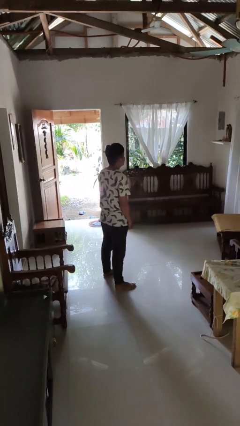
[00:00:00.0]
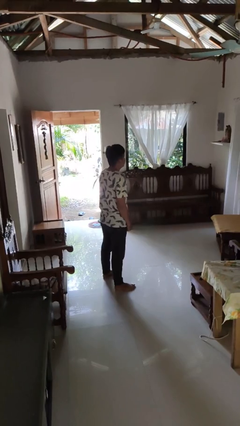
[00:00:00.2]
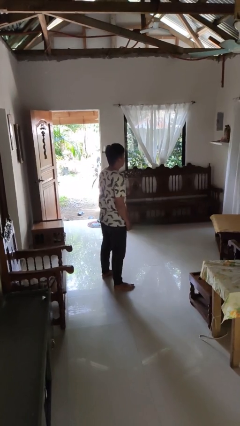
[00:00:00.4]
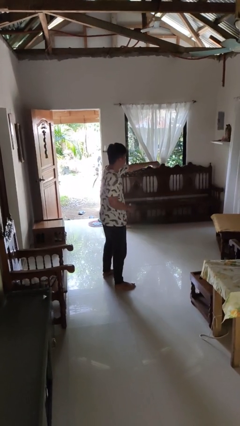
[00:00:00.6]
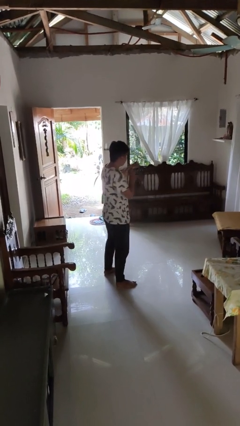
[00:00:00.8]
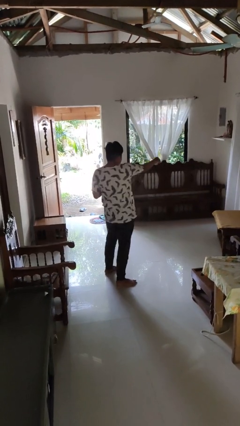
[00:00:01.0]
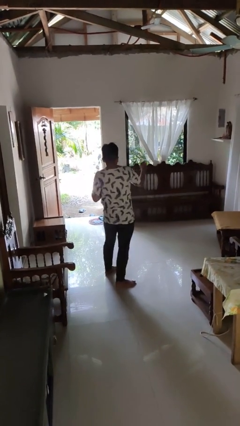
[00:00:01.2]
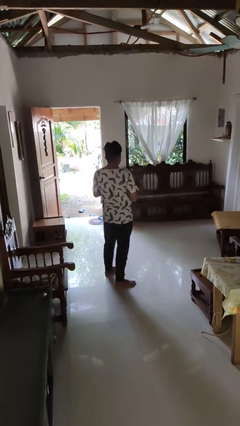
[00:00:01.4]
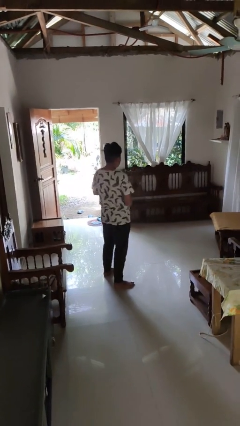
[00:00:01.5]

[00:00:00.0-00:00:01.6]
person punches

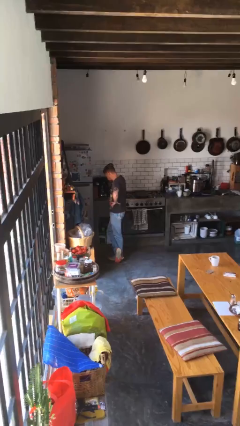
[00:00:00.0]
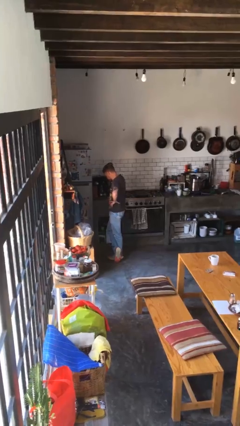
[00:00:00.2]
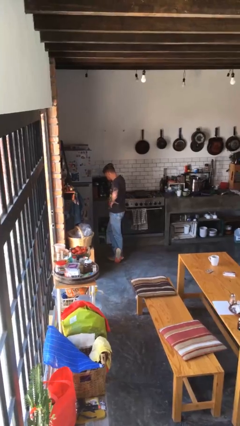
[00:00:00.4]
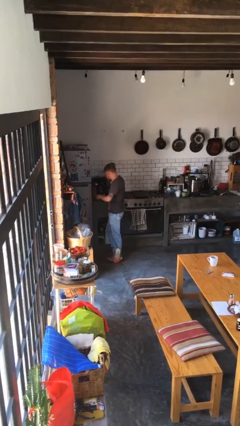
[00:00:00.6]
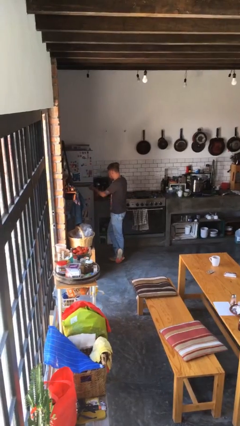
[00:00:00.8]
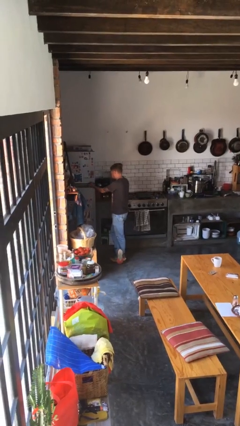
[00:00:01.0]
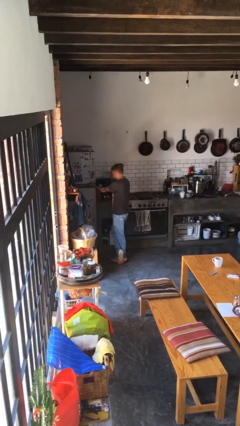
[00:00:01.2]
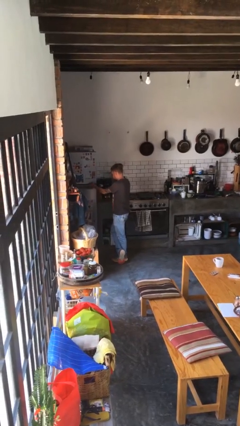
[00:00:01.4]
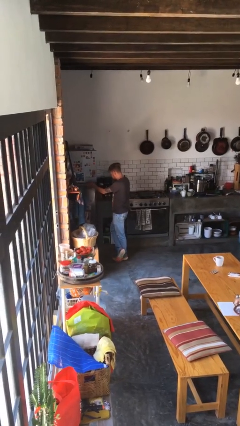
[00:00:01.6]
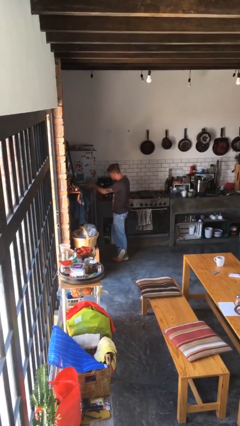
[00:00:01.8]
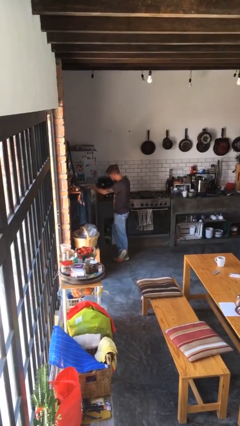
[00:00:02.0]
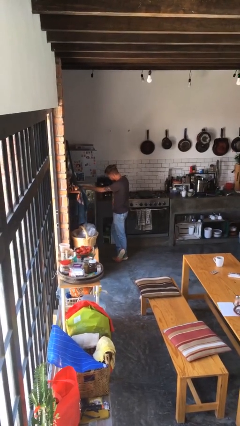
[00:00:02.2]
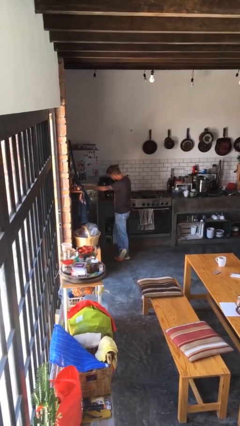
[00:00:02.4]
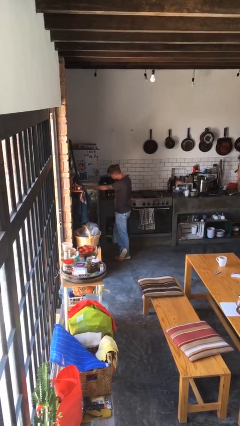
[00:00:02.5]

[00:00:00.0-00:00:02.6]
person opens refrigerator

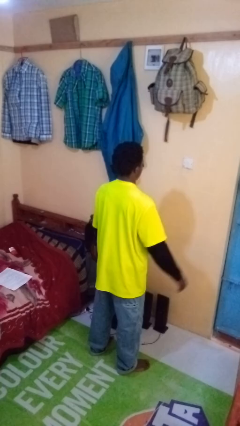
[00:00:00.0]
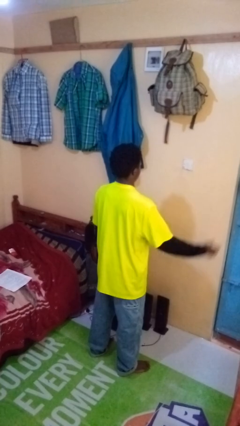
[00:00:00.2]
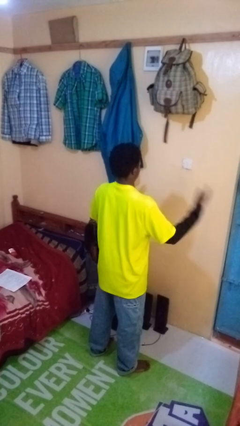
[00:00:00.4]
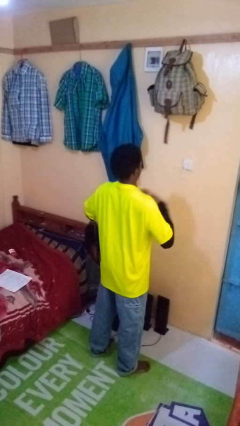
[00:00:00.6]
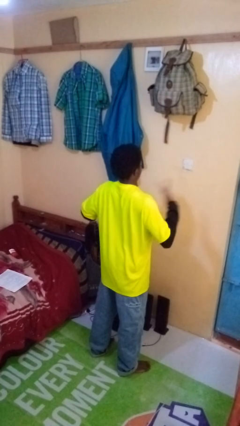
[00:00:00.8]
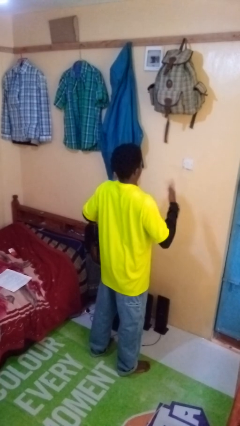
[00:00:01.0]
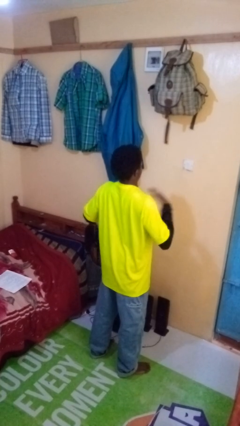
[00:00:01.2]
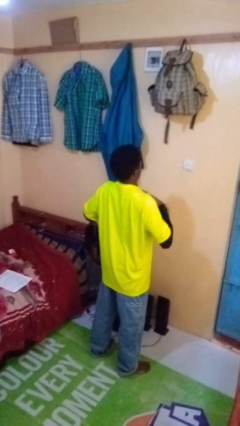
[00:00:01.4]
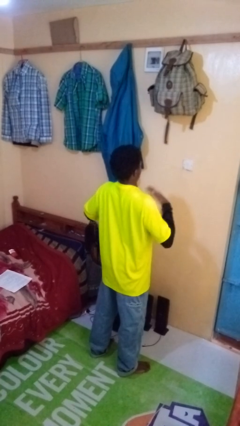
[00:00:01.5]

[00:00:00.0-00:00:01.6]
person drums on chest

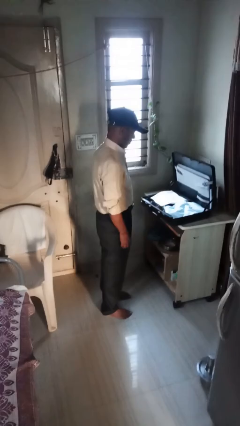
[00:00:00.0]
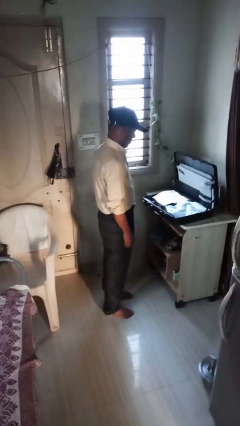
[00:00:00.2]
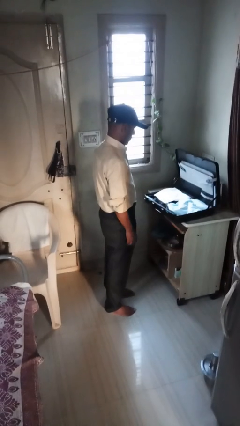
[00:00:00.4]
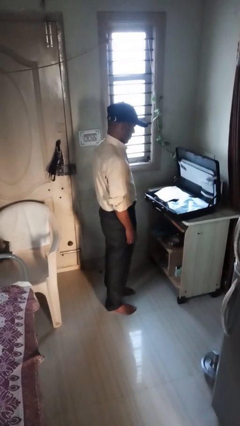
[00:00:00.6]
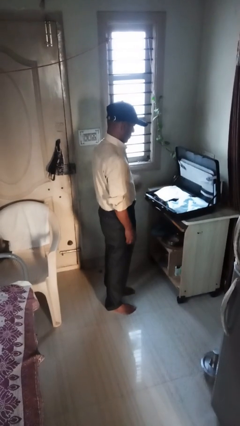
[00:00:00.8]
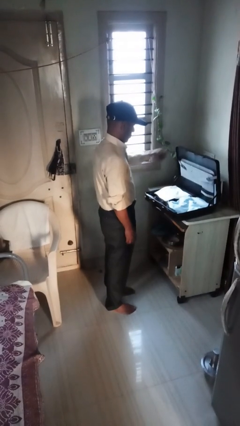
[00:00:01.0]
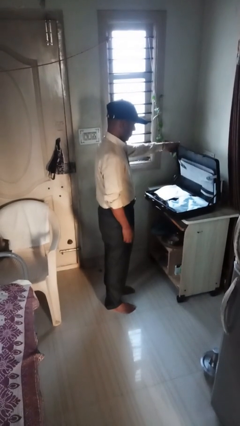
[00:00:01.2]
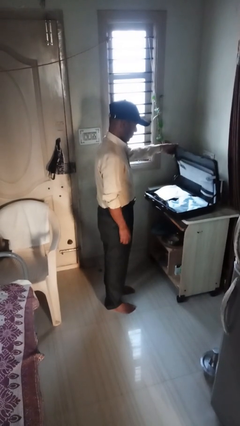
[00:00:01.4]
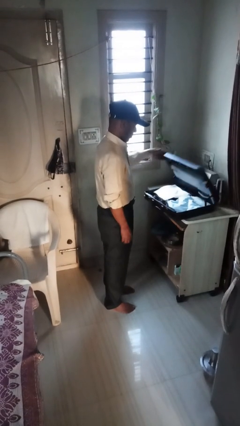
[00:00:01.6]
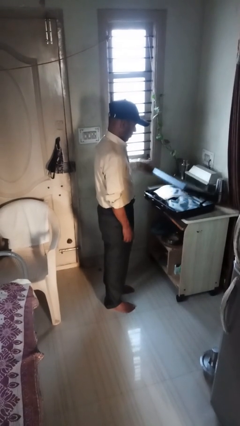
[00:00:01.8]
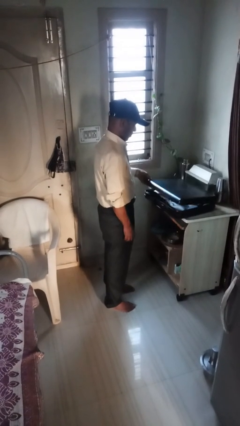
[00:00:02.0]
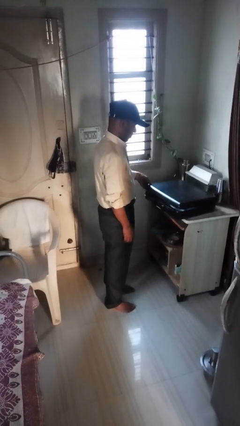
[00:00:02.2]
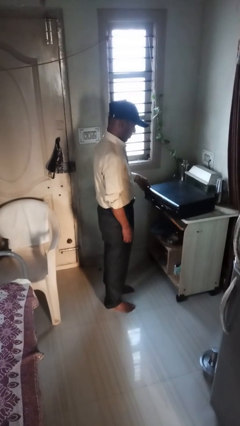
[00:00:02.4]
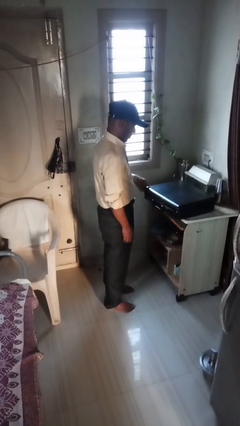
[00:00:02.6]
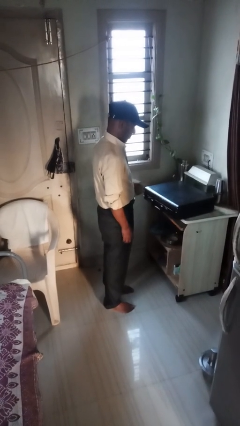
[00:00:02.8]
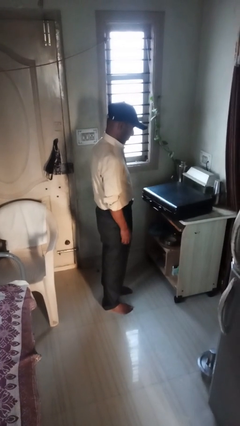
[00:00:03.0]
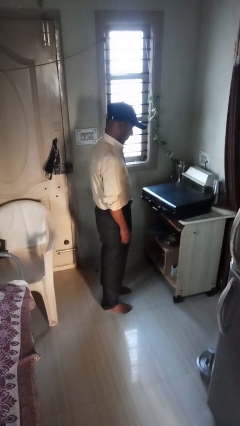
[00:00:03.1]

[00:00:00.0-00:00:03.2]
person closes suitcase

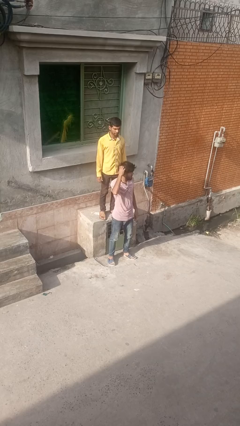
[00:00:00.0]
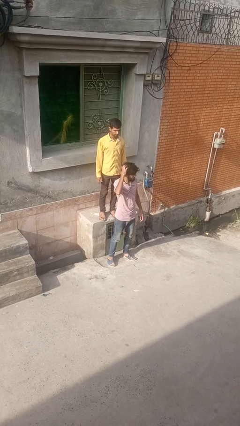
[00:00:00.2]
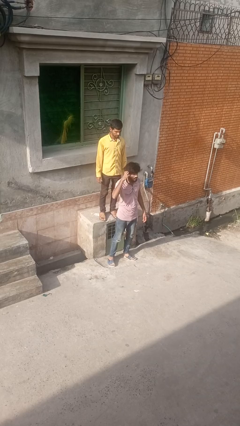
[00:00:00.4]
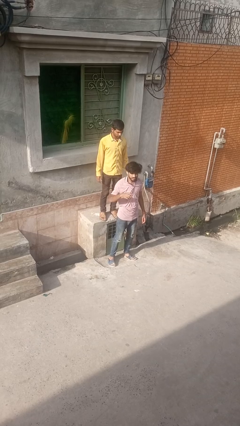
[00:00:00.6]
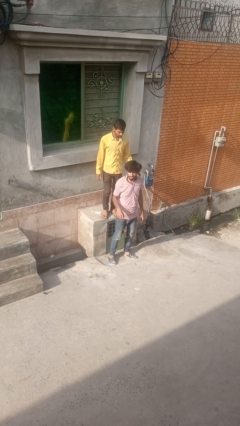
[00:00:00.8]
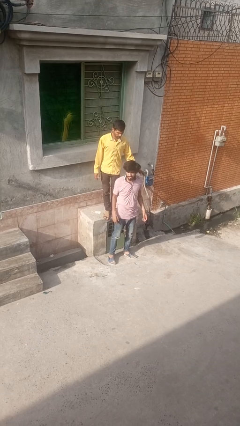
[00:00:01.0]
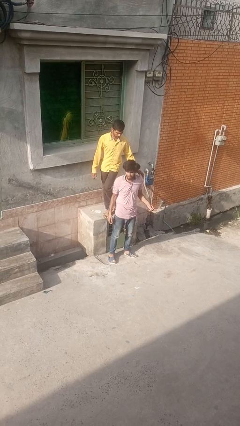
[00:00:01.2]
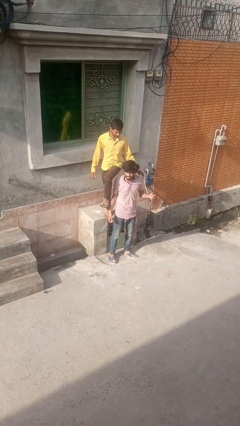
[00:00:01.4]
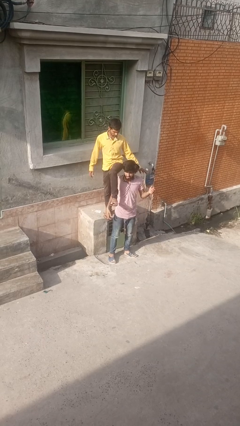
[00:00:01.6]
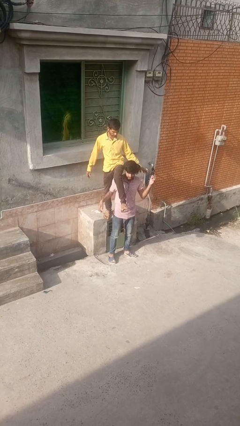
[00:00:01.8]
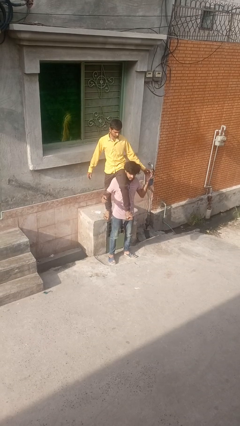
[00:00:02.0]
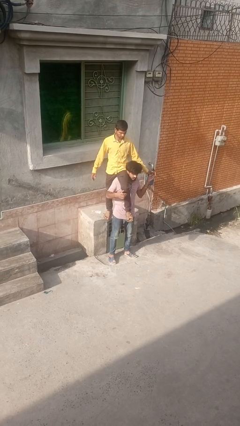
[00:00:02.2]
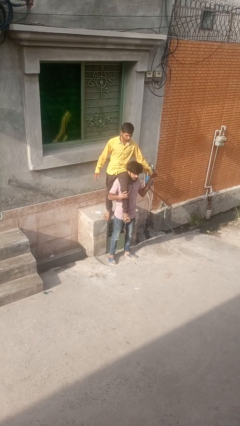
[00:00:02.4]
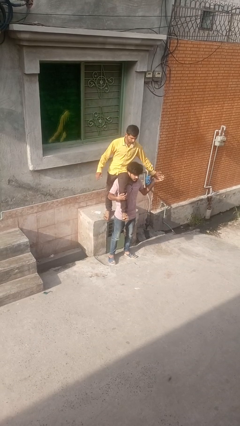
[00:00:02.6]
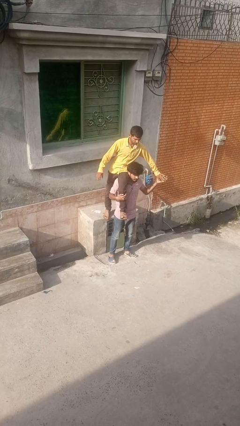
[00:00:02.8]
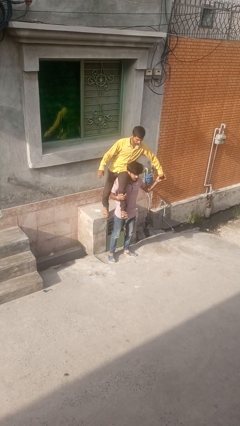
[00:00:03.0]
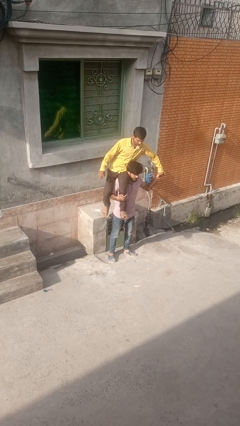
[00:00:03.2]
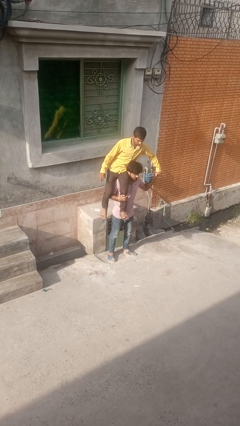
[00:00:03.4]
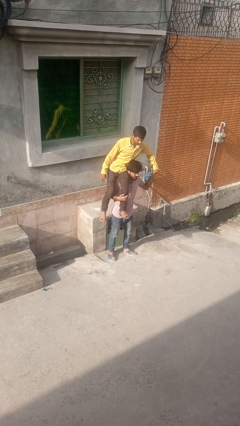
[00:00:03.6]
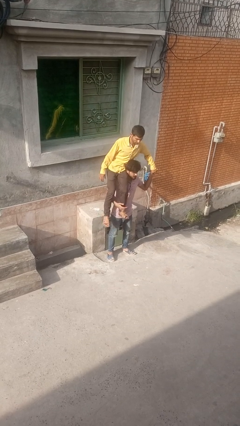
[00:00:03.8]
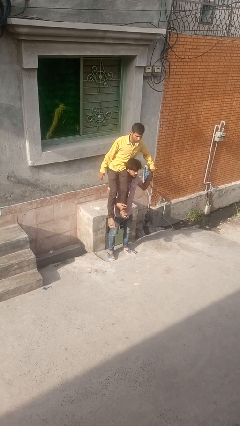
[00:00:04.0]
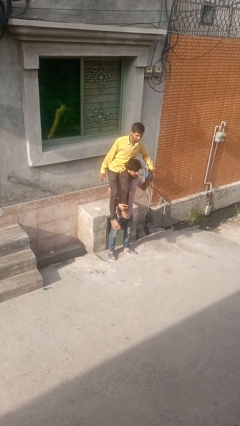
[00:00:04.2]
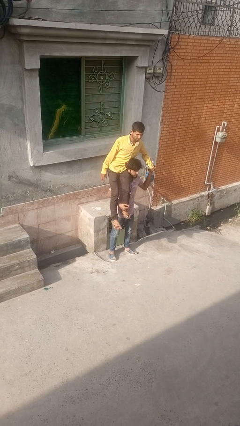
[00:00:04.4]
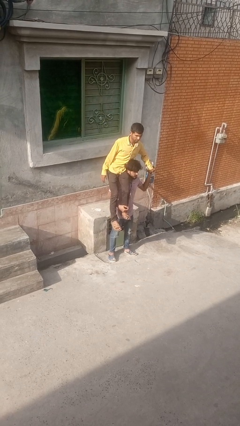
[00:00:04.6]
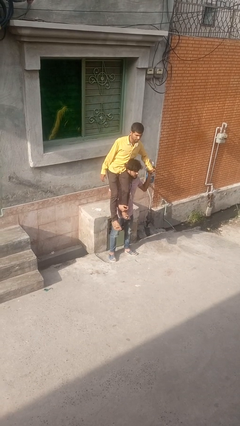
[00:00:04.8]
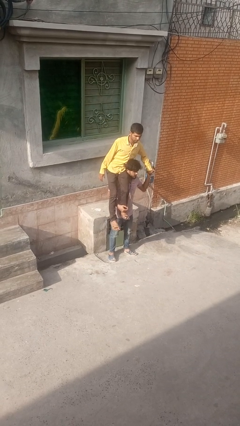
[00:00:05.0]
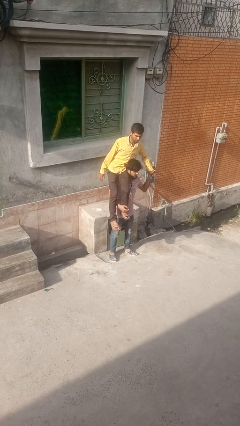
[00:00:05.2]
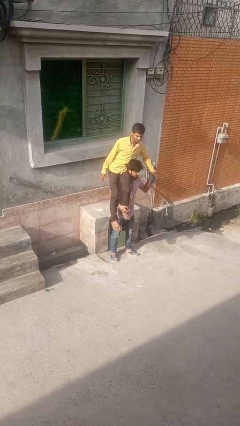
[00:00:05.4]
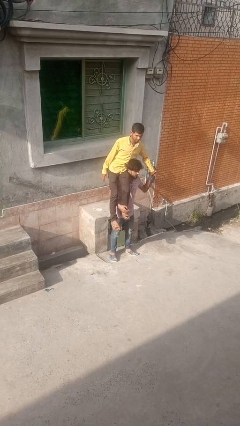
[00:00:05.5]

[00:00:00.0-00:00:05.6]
person carries person over shoulder

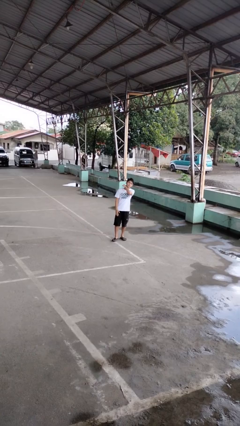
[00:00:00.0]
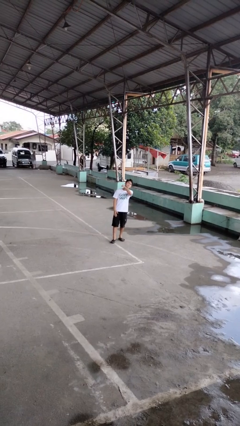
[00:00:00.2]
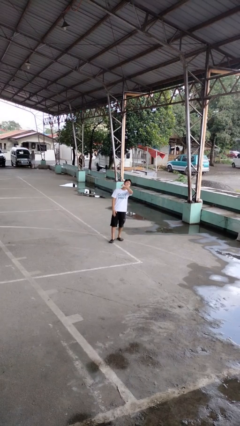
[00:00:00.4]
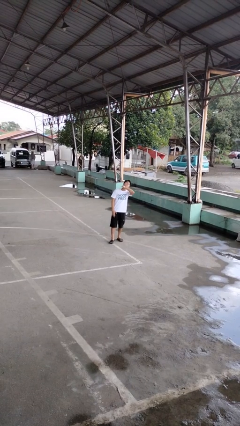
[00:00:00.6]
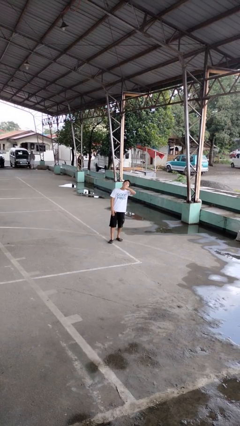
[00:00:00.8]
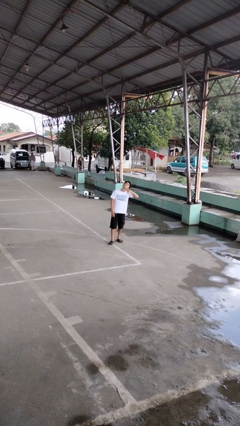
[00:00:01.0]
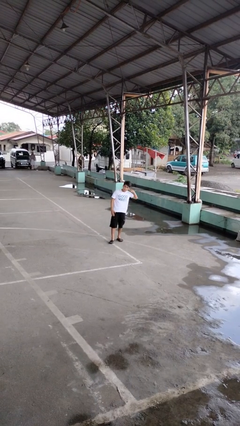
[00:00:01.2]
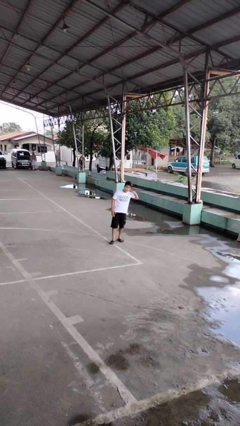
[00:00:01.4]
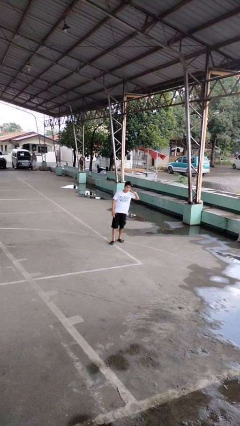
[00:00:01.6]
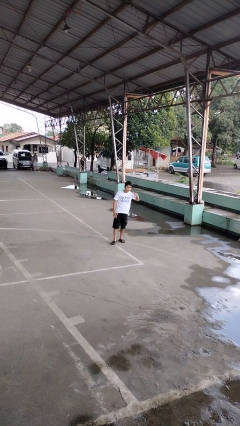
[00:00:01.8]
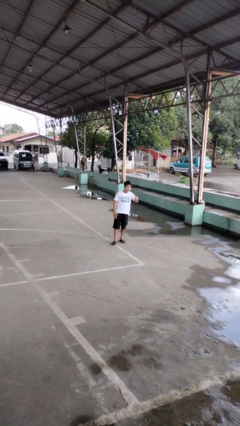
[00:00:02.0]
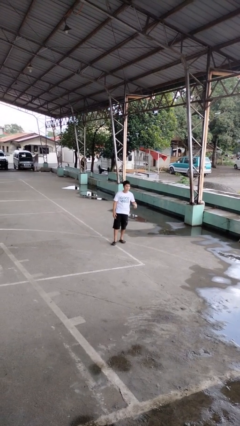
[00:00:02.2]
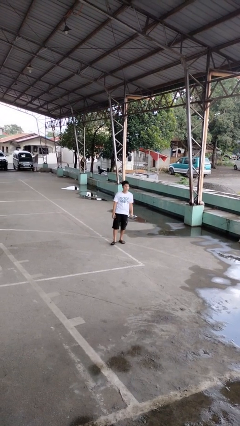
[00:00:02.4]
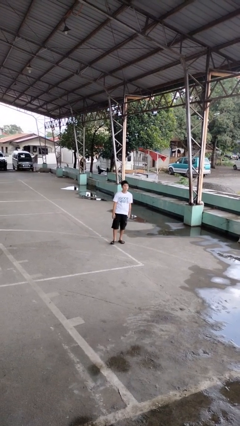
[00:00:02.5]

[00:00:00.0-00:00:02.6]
person gestures cut
